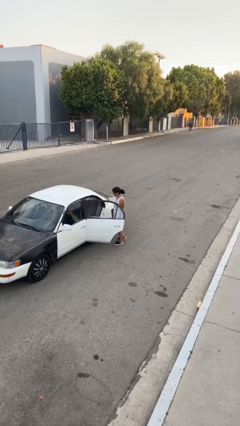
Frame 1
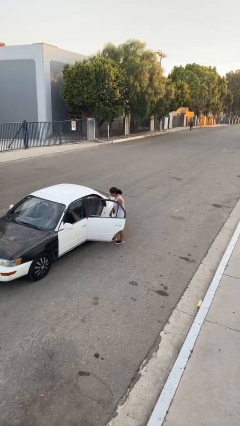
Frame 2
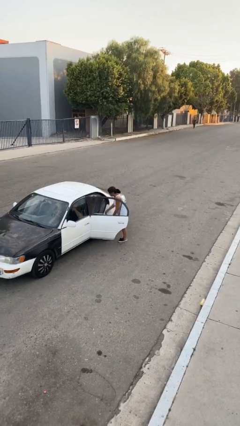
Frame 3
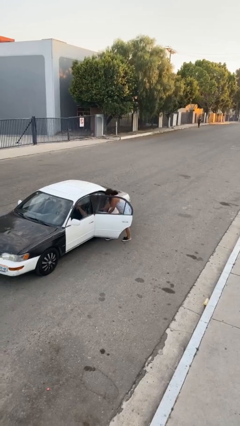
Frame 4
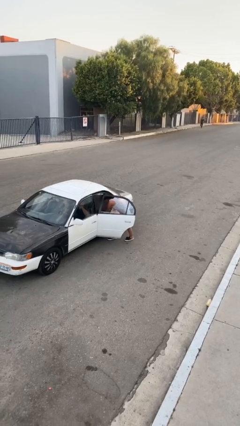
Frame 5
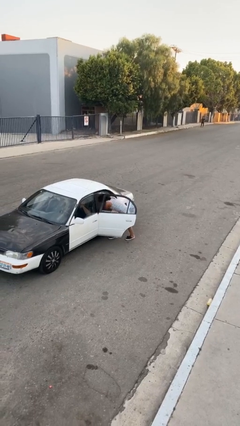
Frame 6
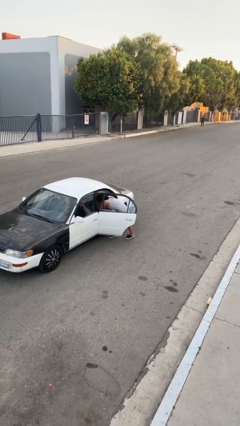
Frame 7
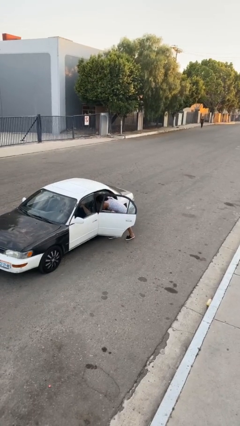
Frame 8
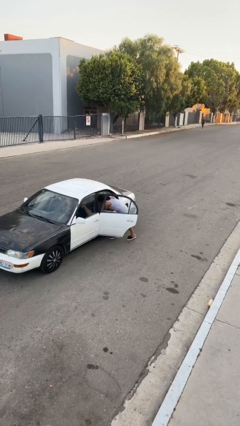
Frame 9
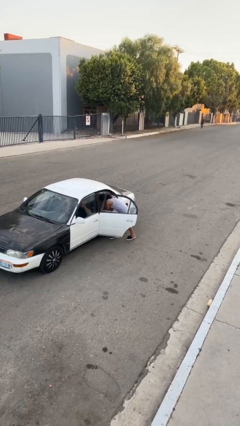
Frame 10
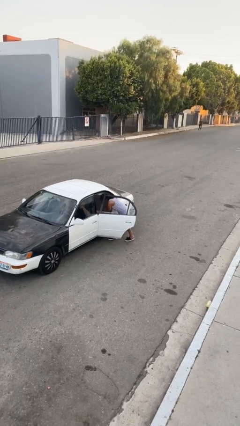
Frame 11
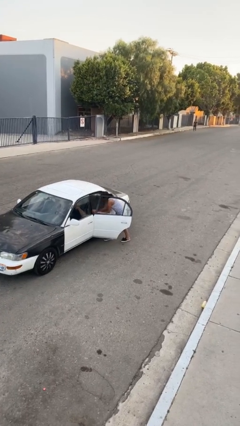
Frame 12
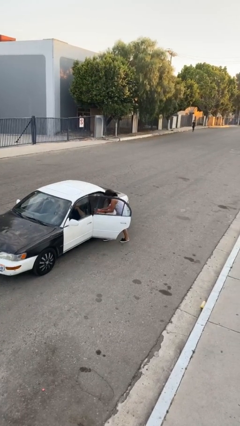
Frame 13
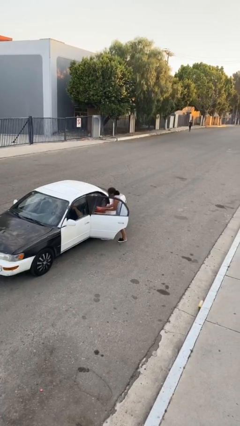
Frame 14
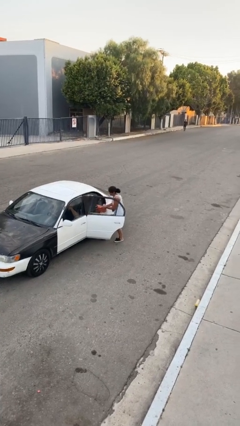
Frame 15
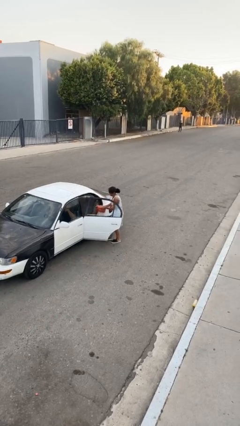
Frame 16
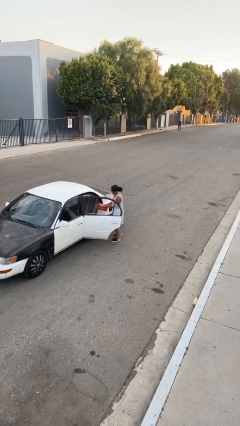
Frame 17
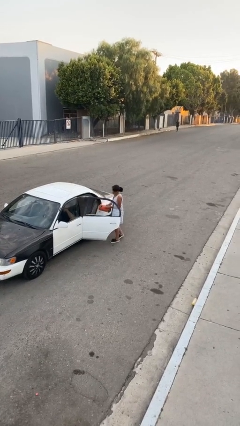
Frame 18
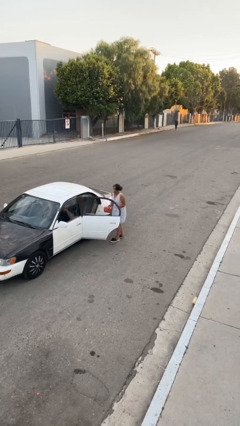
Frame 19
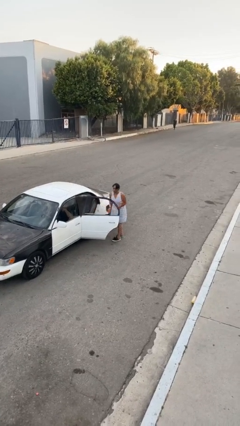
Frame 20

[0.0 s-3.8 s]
person unloads car

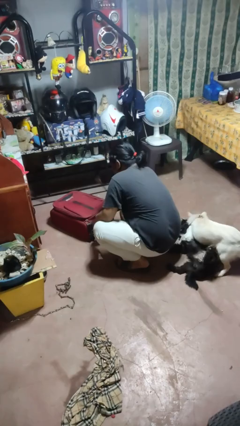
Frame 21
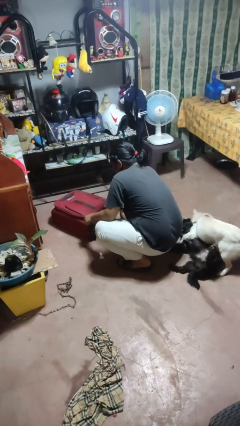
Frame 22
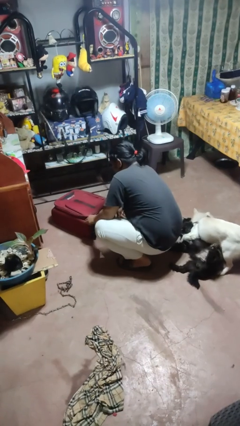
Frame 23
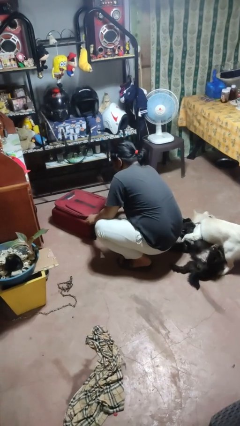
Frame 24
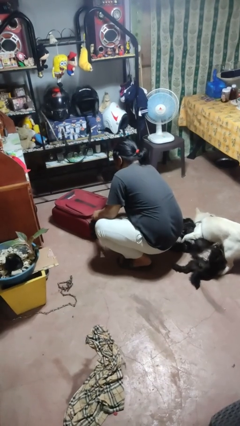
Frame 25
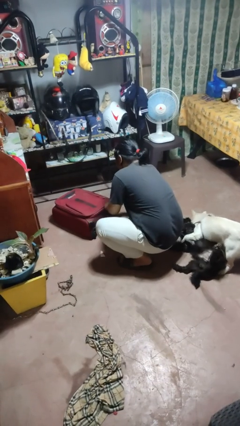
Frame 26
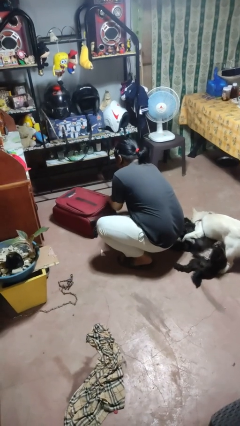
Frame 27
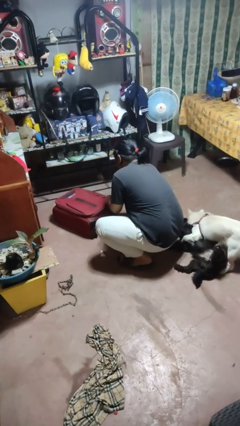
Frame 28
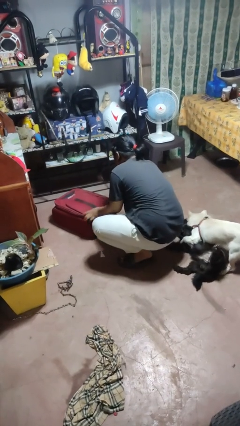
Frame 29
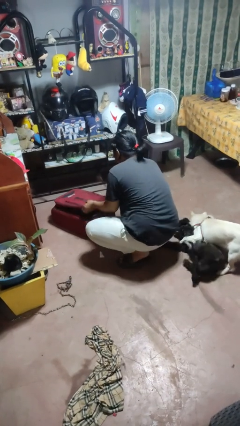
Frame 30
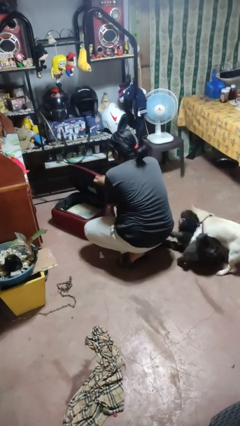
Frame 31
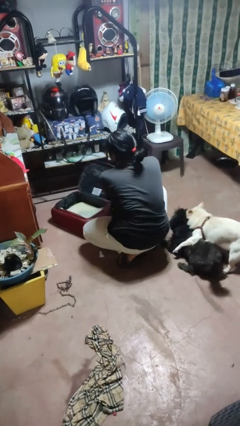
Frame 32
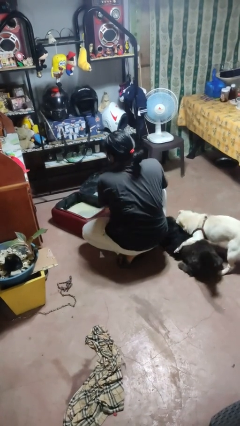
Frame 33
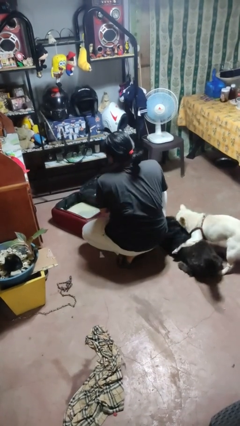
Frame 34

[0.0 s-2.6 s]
person opens suitcase

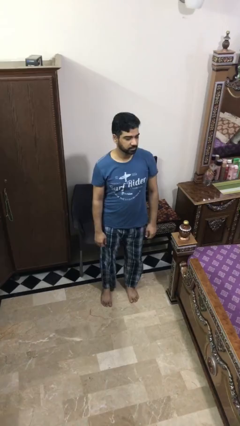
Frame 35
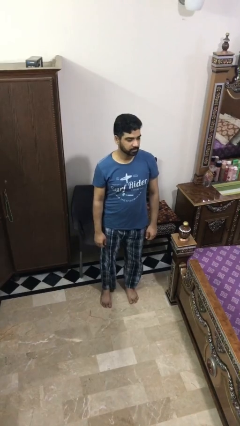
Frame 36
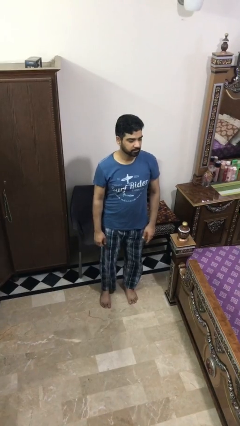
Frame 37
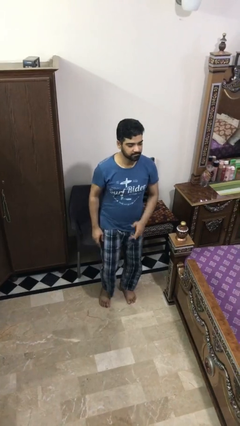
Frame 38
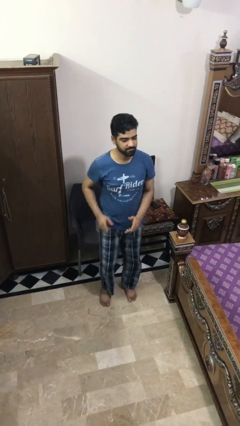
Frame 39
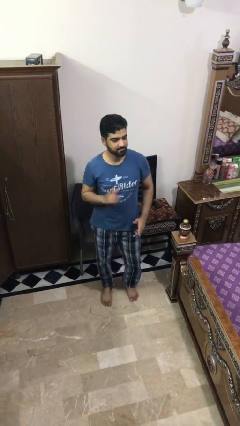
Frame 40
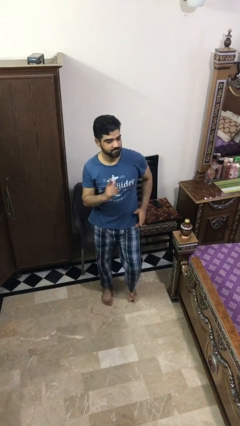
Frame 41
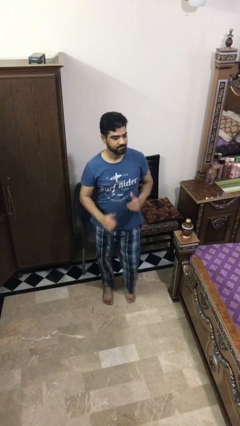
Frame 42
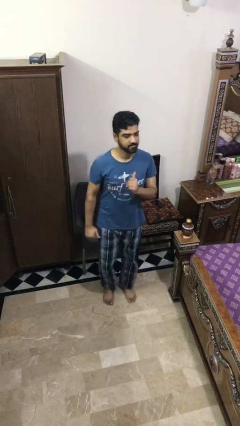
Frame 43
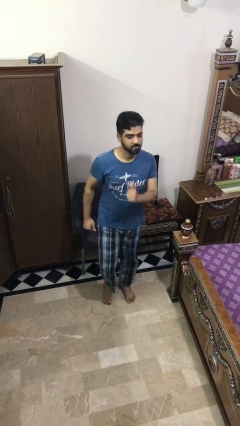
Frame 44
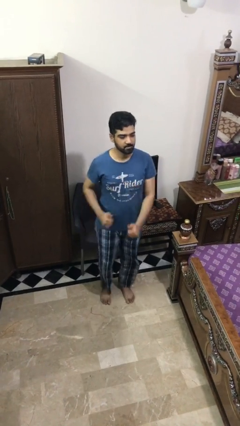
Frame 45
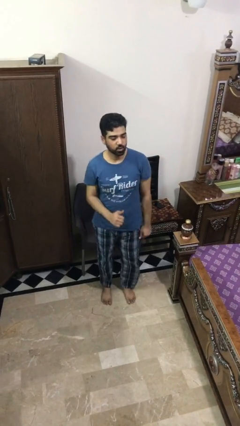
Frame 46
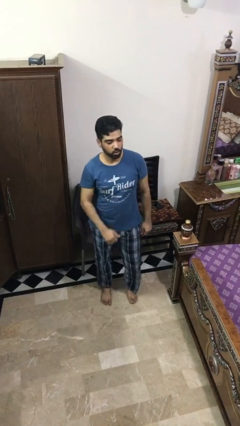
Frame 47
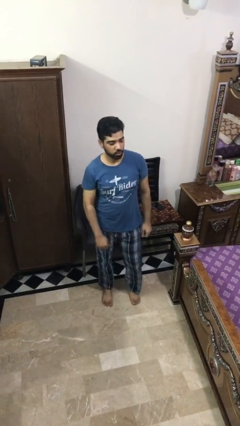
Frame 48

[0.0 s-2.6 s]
person dances in place

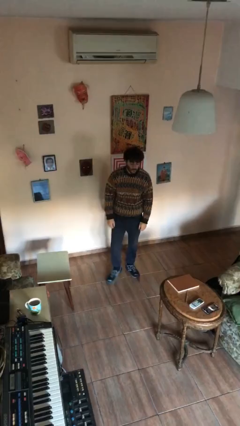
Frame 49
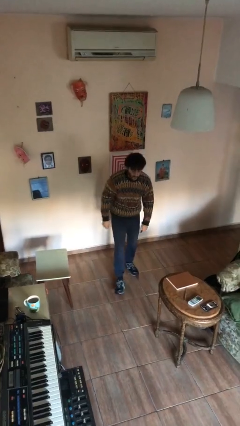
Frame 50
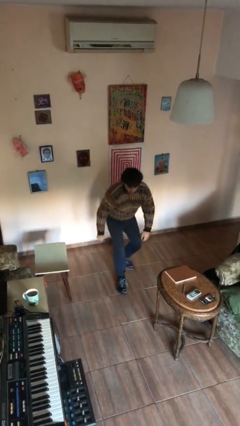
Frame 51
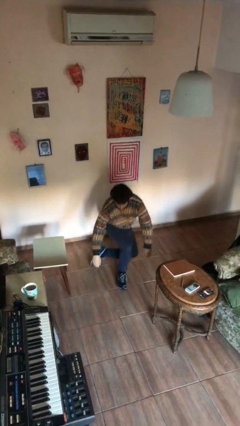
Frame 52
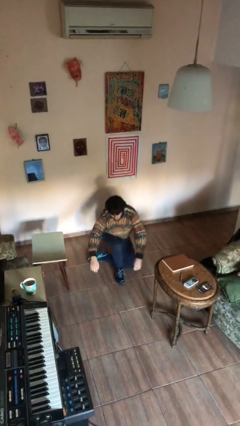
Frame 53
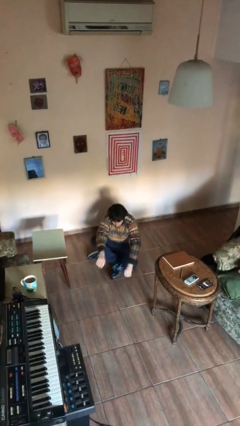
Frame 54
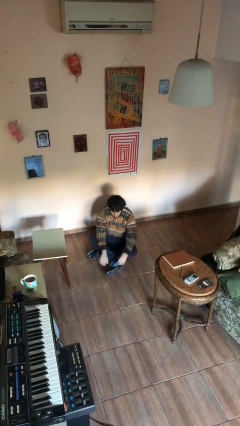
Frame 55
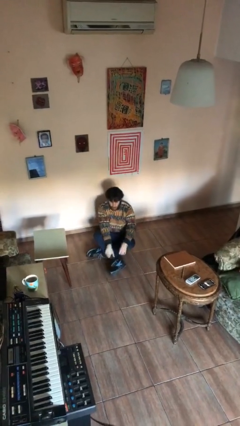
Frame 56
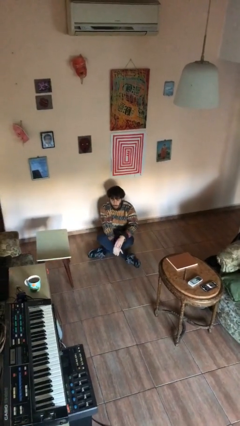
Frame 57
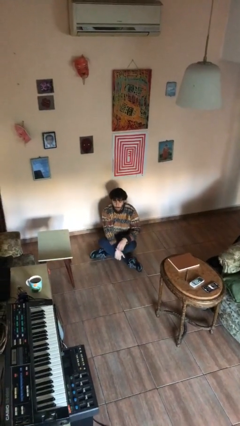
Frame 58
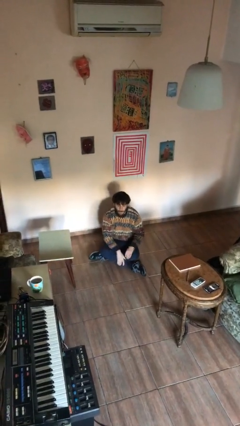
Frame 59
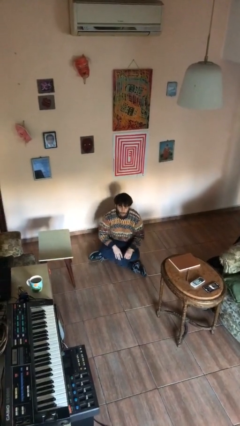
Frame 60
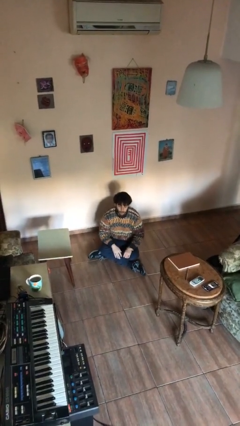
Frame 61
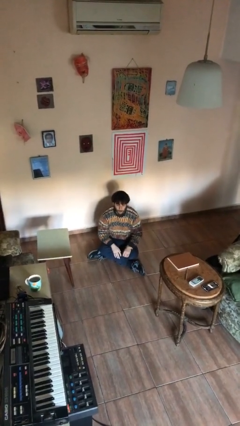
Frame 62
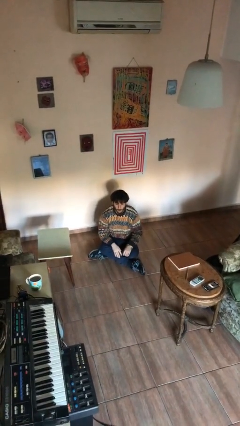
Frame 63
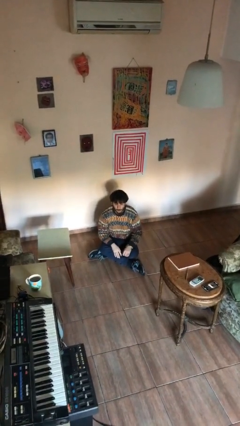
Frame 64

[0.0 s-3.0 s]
person sits crisscross

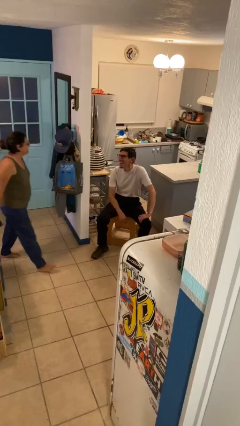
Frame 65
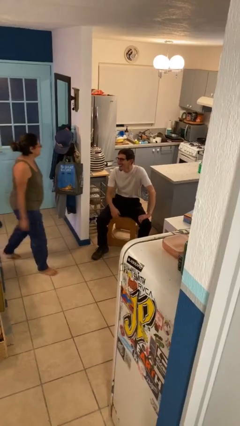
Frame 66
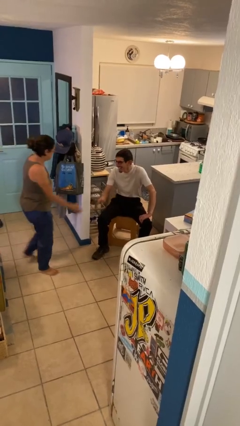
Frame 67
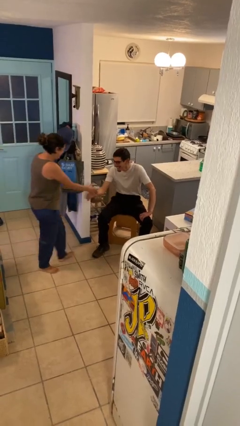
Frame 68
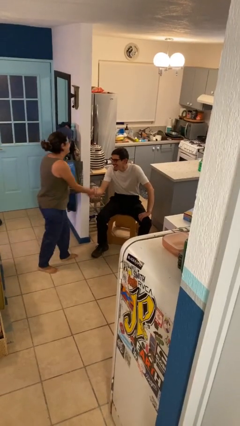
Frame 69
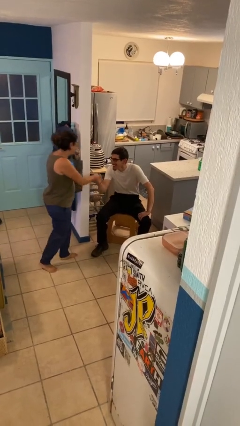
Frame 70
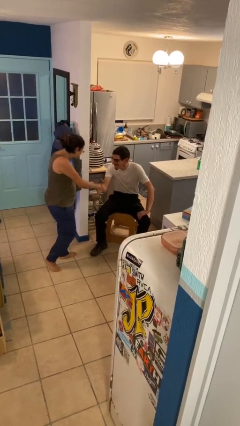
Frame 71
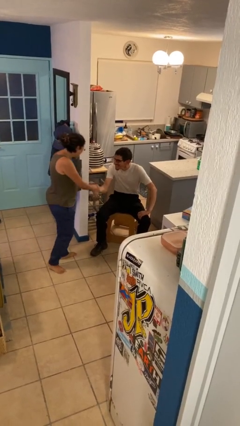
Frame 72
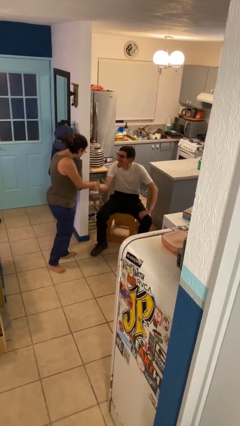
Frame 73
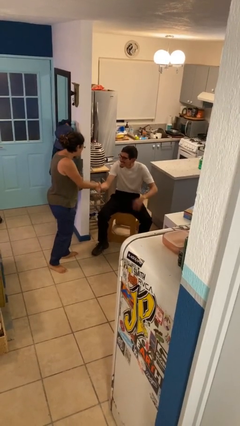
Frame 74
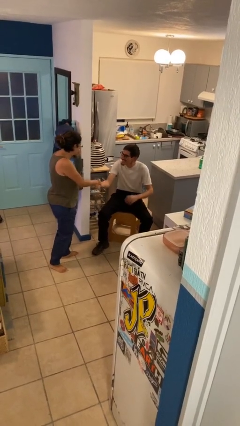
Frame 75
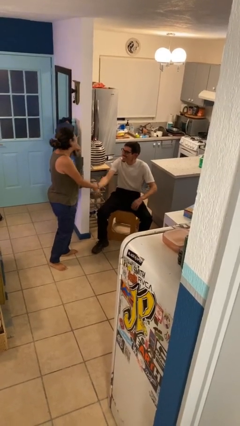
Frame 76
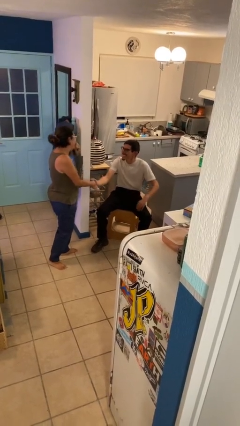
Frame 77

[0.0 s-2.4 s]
person shakes hand

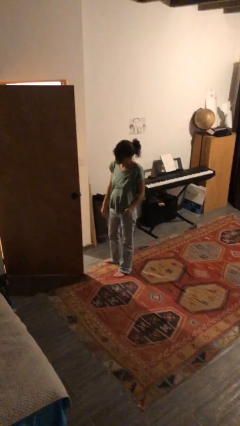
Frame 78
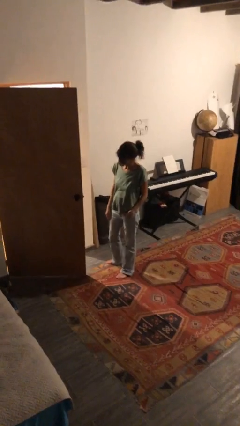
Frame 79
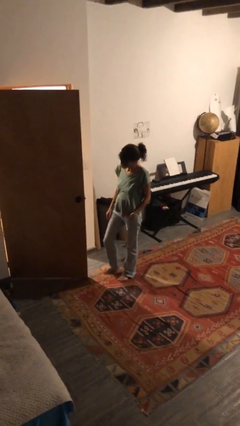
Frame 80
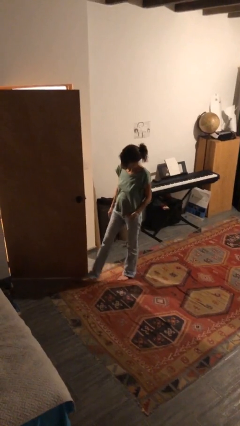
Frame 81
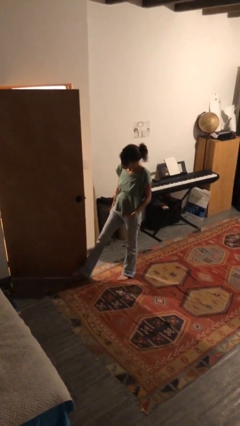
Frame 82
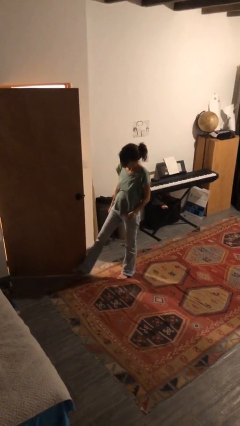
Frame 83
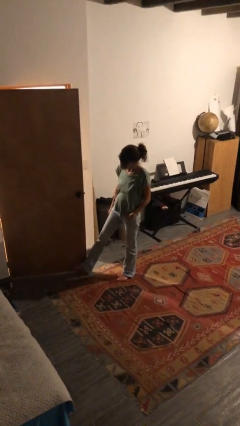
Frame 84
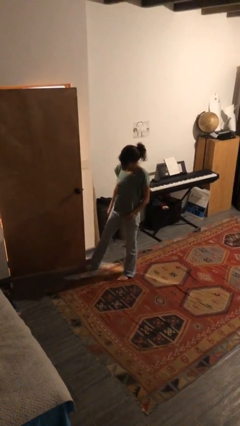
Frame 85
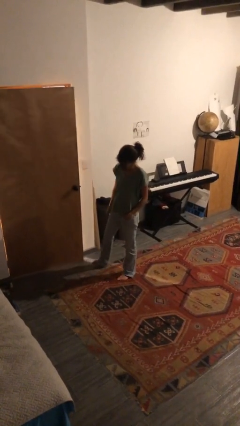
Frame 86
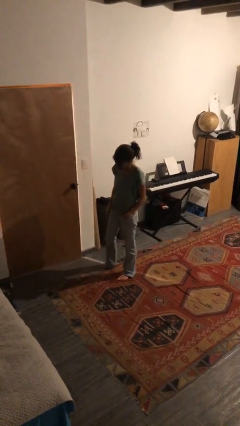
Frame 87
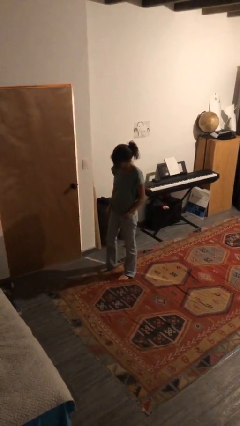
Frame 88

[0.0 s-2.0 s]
person closes door with foot

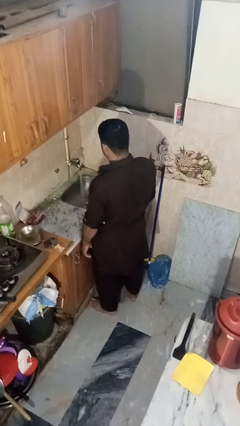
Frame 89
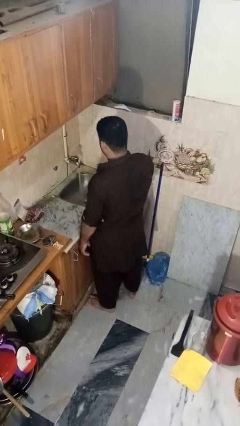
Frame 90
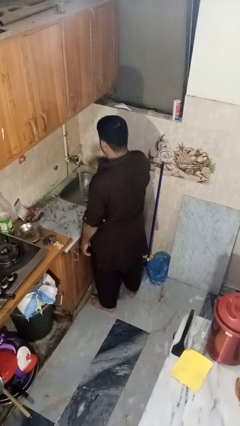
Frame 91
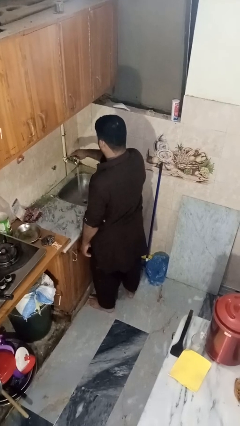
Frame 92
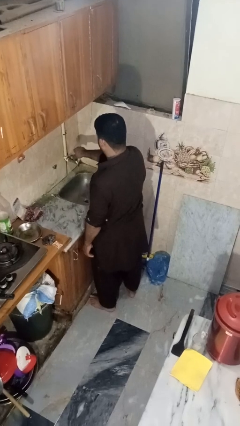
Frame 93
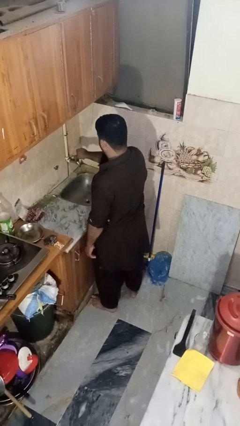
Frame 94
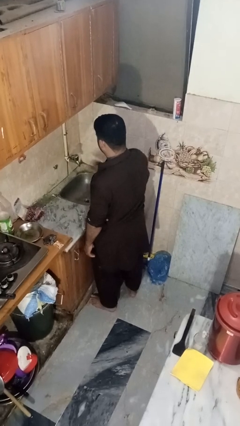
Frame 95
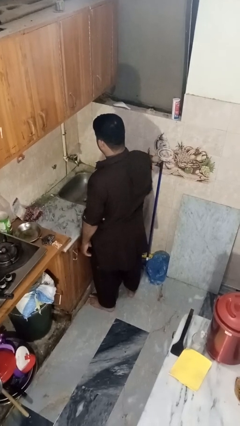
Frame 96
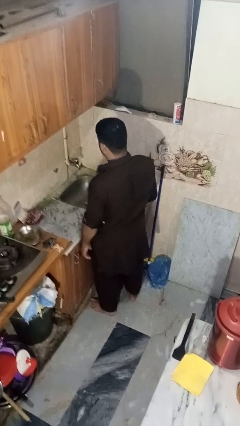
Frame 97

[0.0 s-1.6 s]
person turns off faucet
